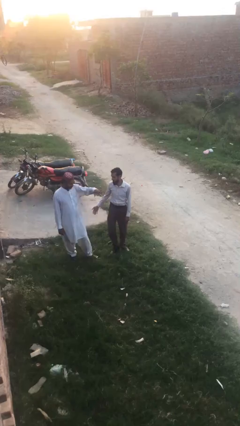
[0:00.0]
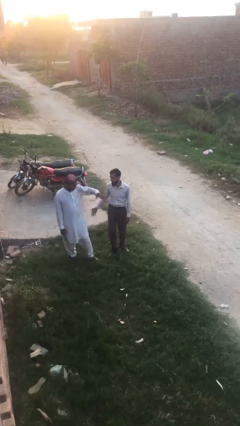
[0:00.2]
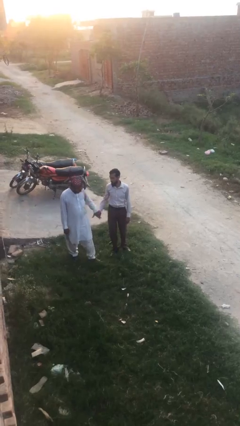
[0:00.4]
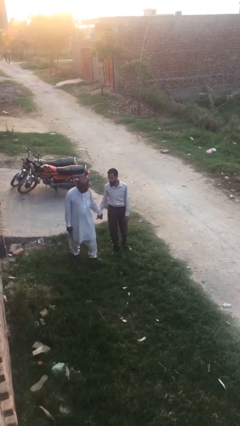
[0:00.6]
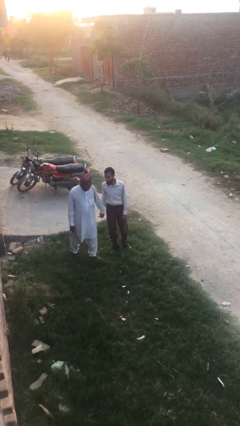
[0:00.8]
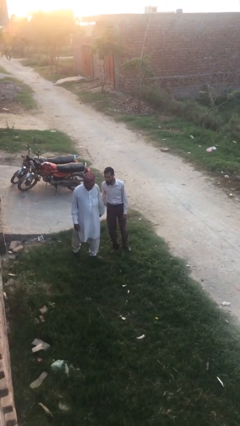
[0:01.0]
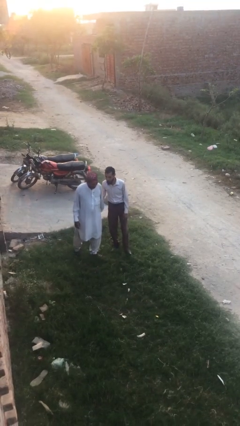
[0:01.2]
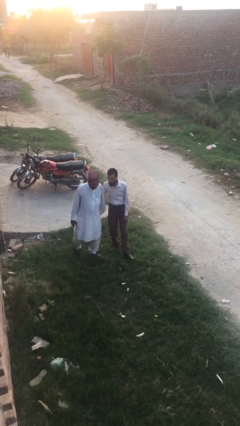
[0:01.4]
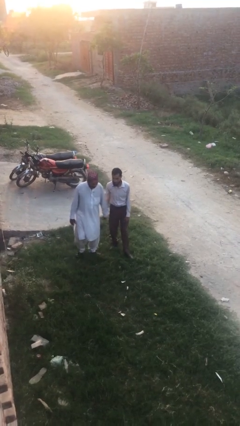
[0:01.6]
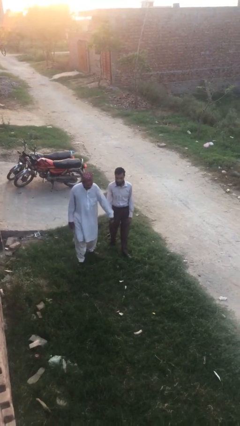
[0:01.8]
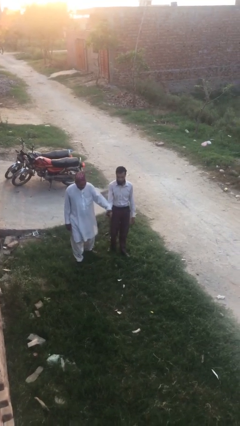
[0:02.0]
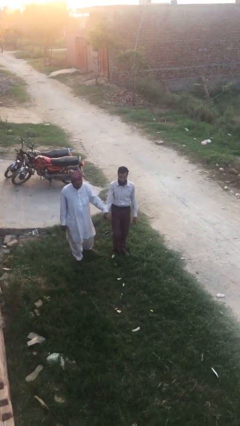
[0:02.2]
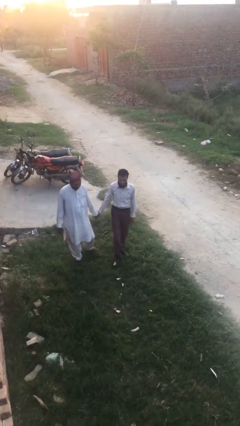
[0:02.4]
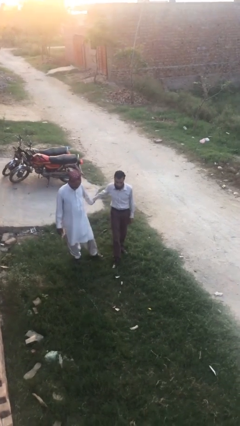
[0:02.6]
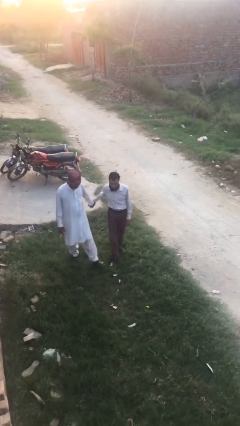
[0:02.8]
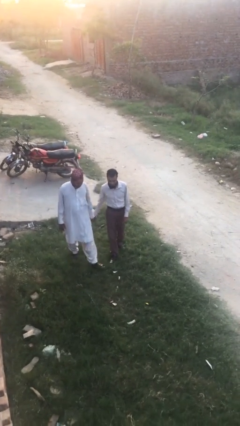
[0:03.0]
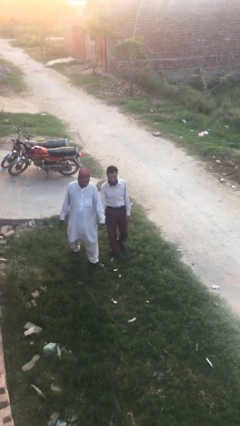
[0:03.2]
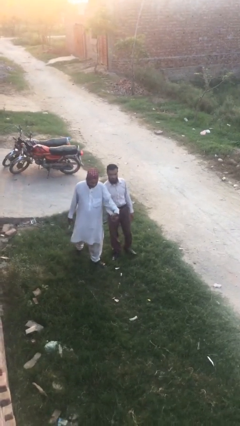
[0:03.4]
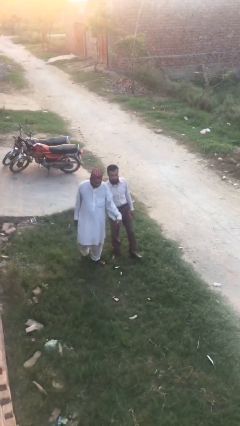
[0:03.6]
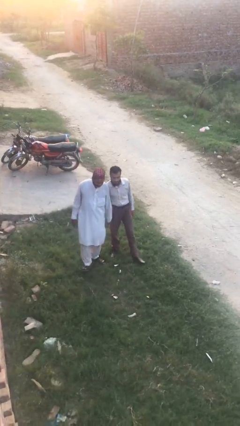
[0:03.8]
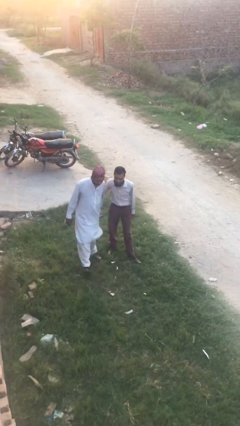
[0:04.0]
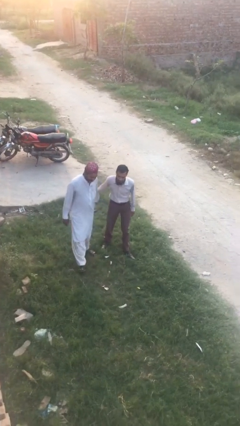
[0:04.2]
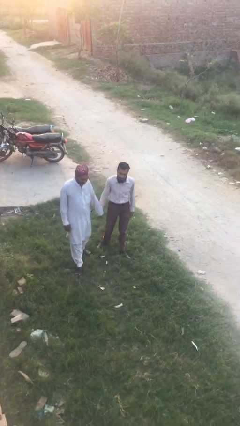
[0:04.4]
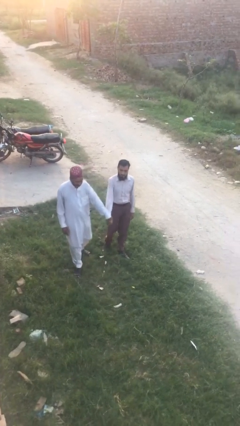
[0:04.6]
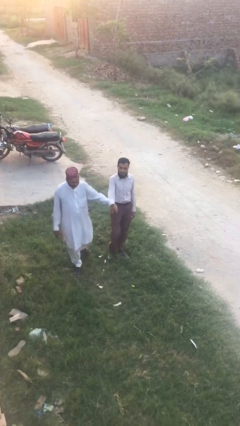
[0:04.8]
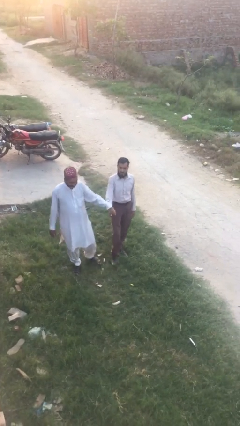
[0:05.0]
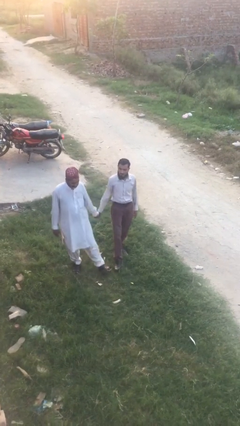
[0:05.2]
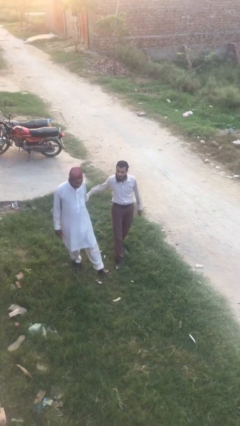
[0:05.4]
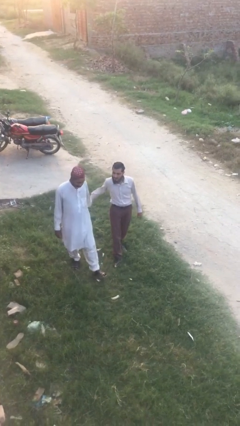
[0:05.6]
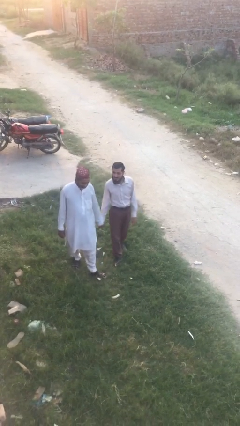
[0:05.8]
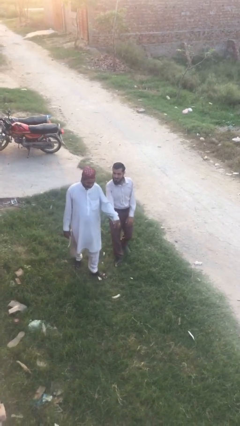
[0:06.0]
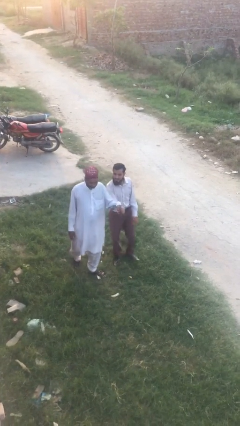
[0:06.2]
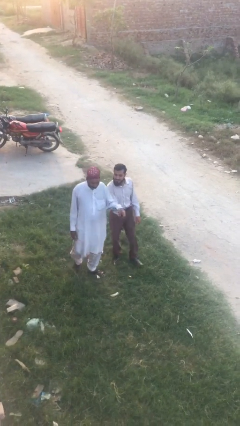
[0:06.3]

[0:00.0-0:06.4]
person holds hand

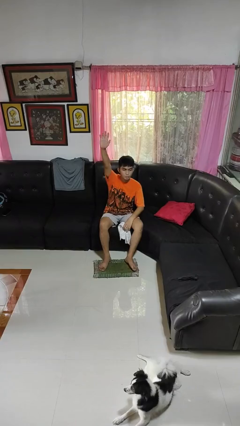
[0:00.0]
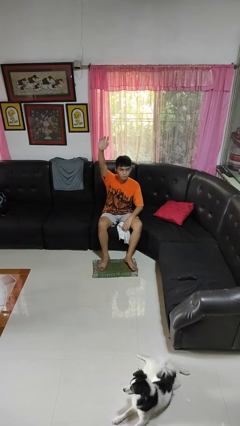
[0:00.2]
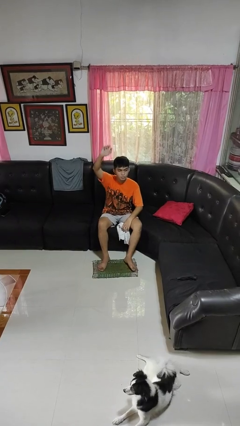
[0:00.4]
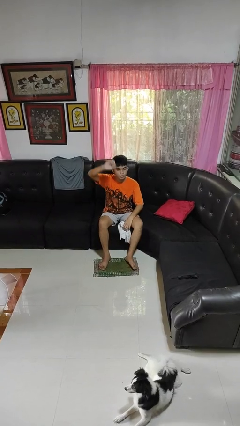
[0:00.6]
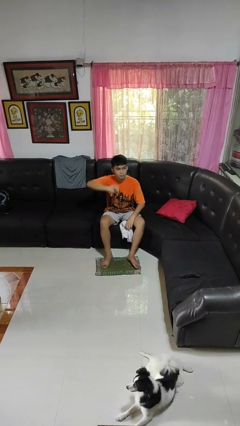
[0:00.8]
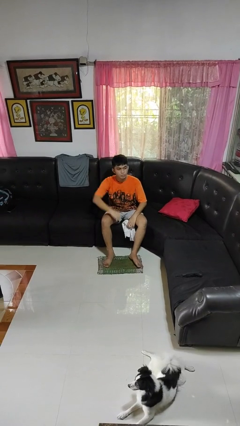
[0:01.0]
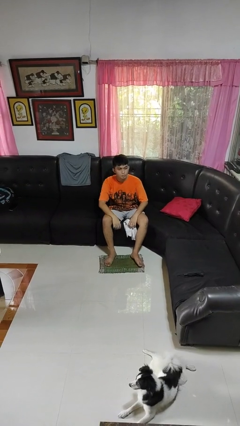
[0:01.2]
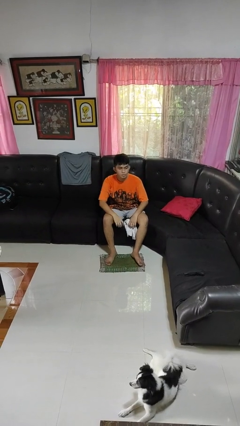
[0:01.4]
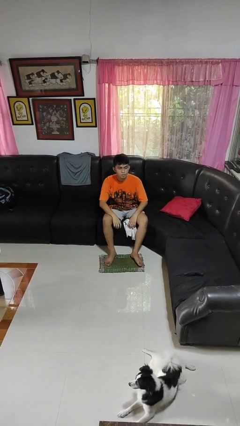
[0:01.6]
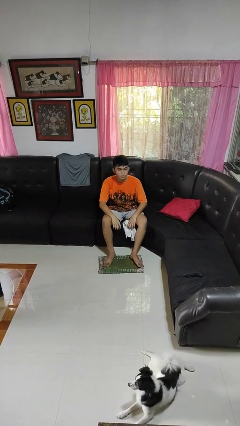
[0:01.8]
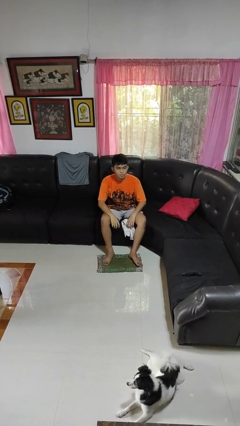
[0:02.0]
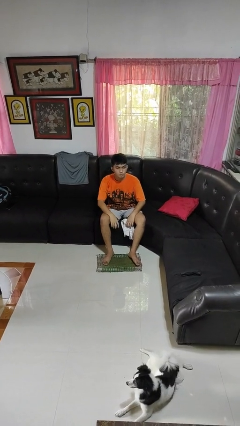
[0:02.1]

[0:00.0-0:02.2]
person gestures lower hand

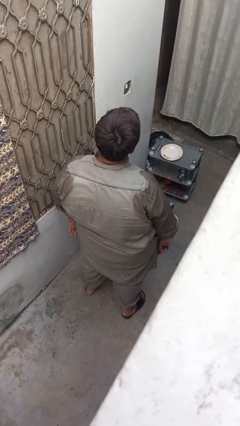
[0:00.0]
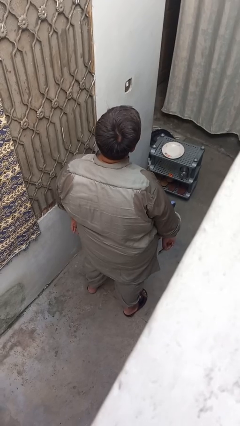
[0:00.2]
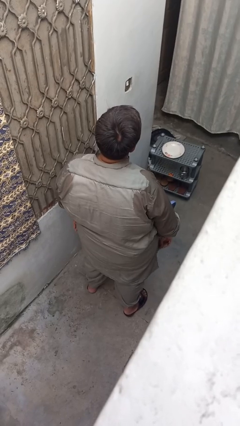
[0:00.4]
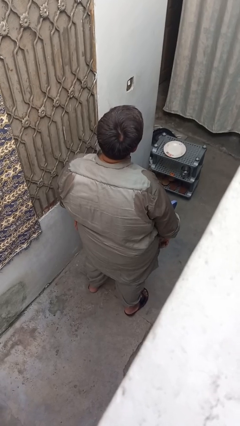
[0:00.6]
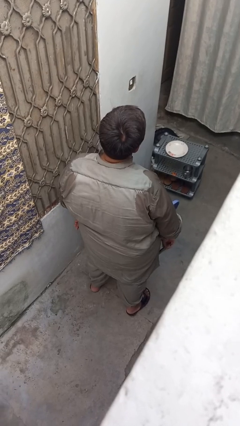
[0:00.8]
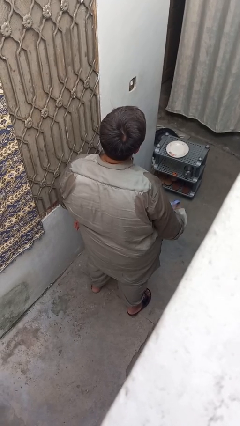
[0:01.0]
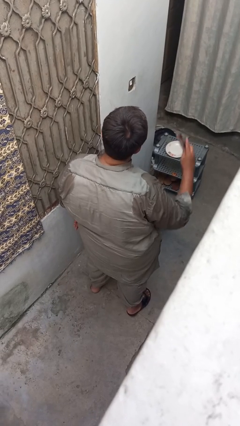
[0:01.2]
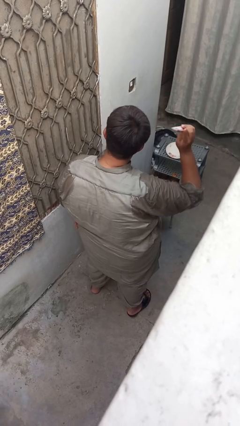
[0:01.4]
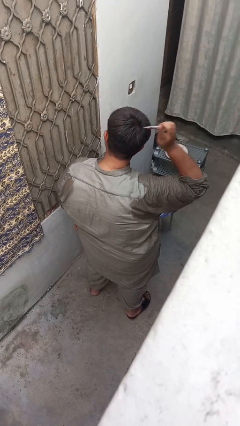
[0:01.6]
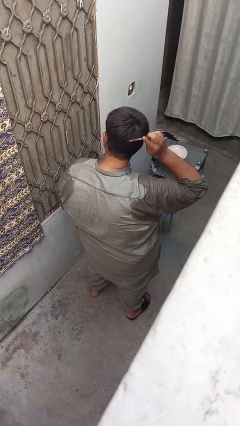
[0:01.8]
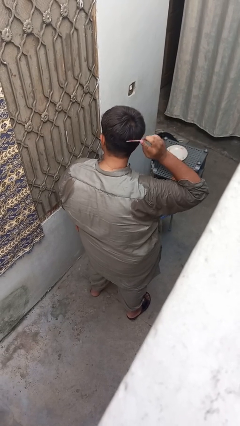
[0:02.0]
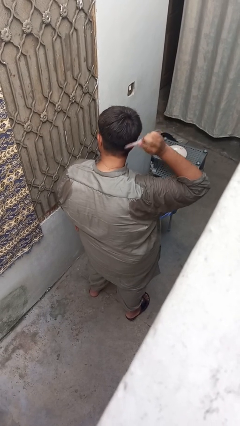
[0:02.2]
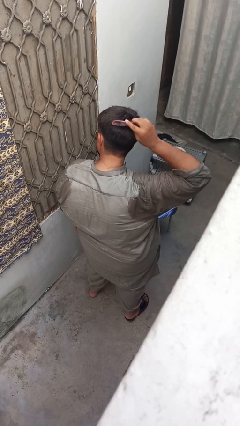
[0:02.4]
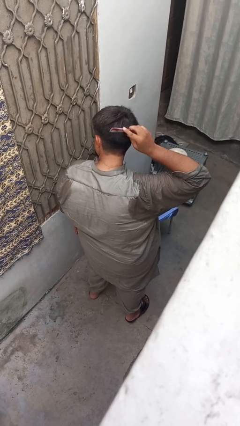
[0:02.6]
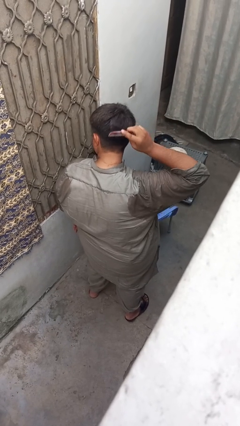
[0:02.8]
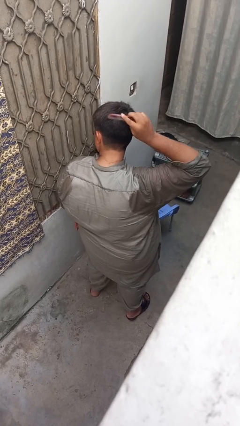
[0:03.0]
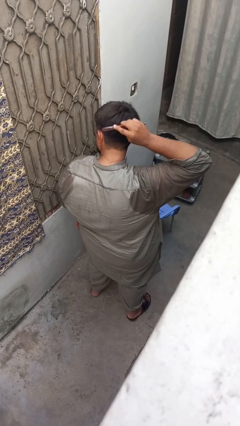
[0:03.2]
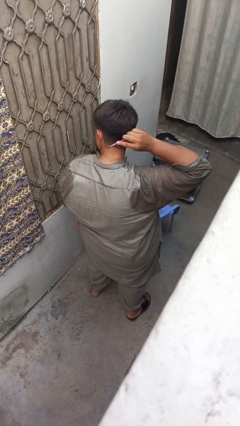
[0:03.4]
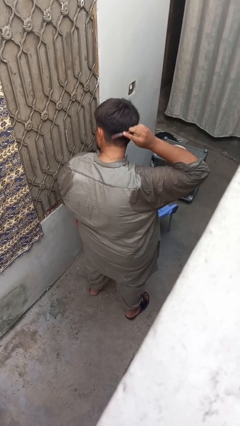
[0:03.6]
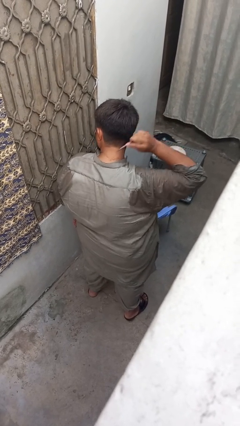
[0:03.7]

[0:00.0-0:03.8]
person brushes hair

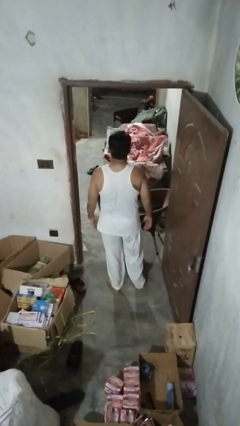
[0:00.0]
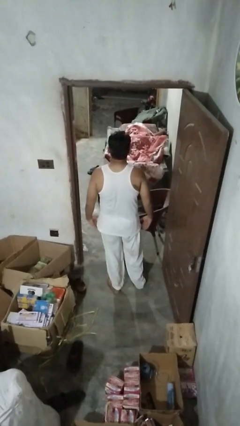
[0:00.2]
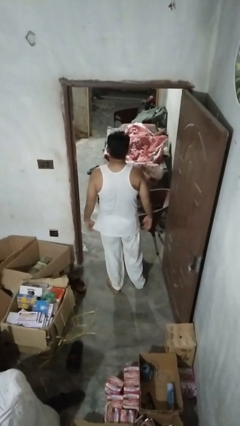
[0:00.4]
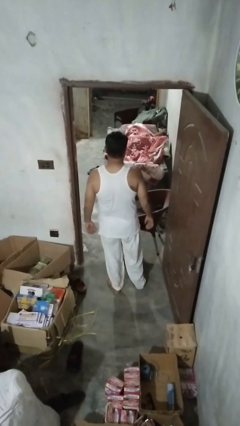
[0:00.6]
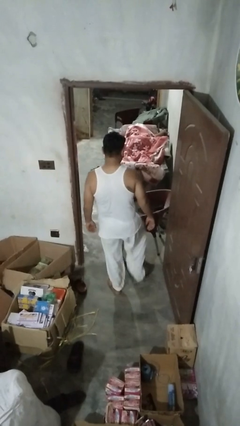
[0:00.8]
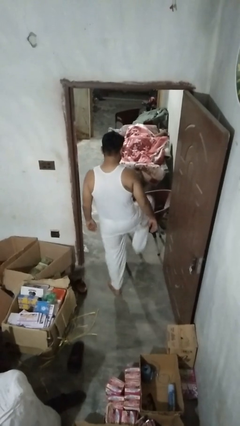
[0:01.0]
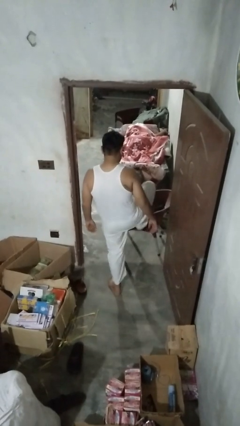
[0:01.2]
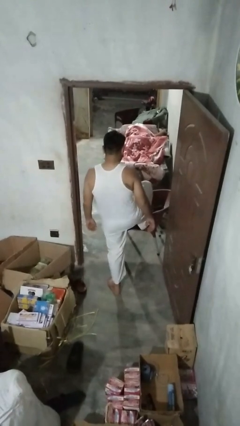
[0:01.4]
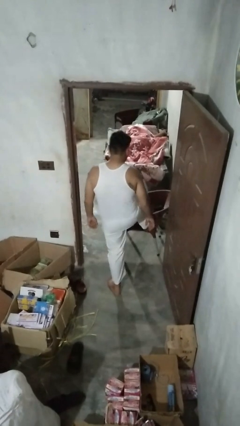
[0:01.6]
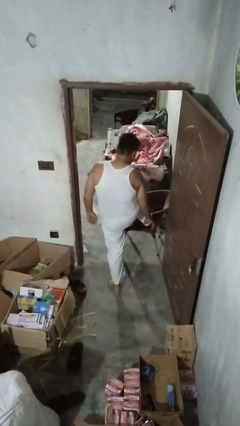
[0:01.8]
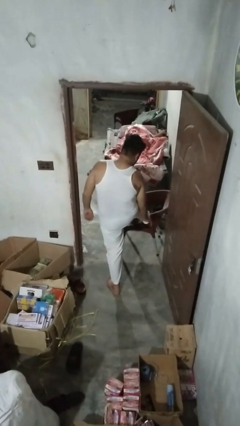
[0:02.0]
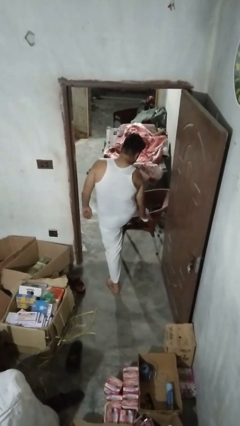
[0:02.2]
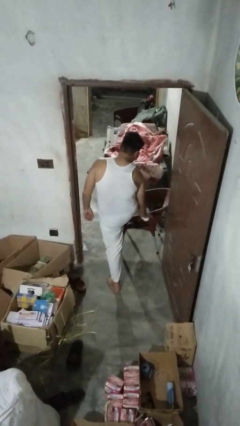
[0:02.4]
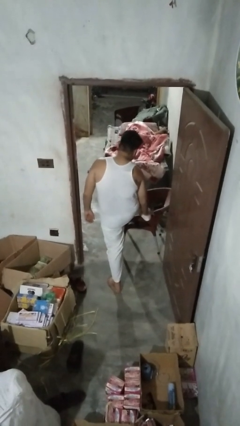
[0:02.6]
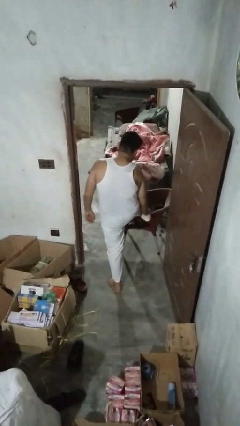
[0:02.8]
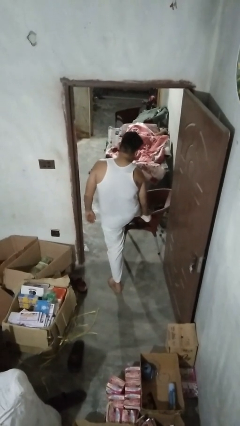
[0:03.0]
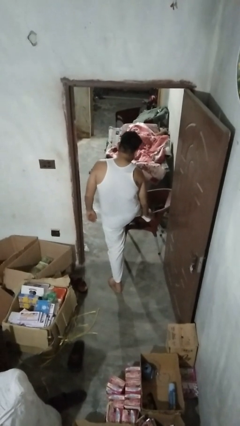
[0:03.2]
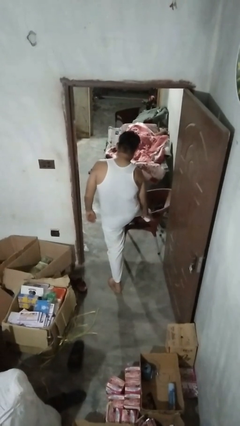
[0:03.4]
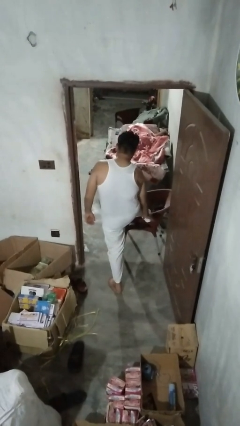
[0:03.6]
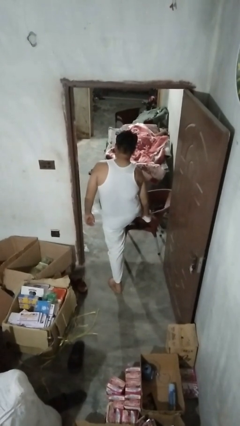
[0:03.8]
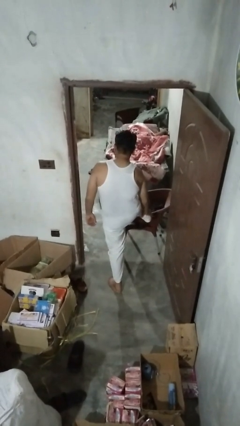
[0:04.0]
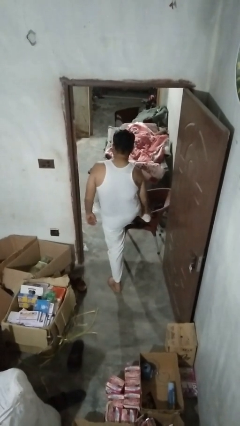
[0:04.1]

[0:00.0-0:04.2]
person stubs toe

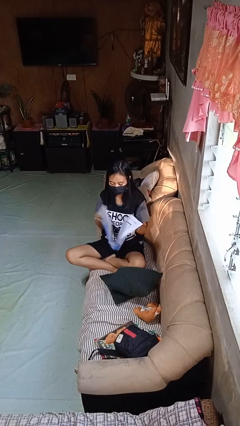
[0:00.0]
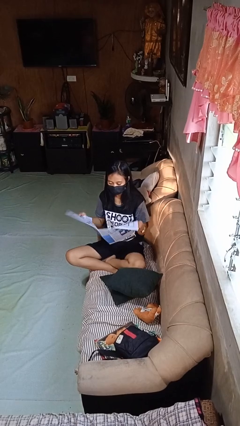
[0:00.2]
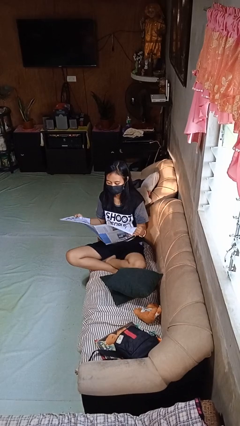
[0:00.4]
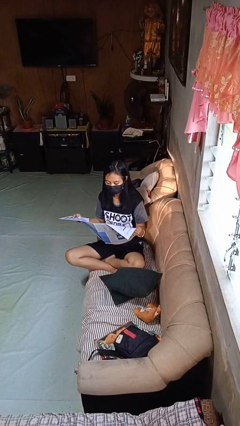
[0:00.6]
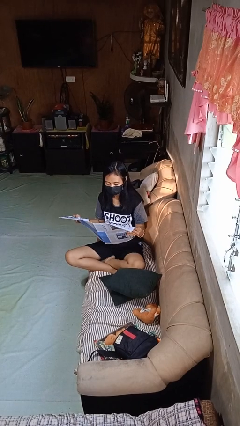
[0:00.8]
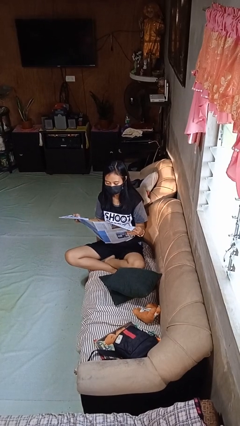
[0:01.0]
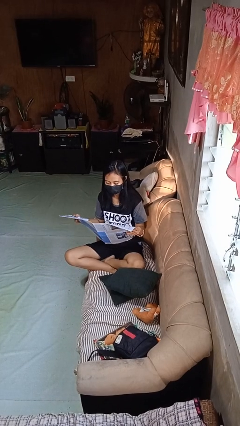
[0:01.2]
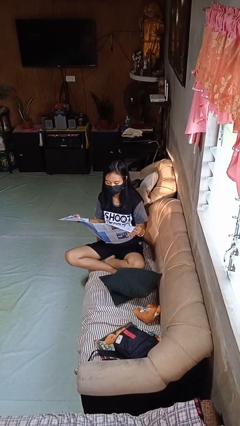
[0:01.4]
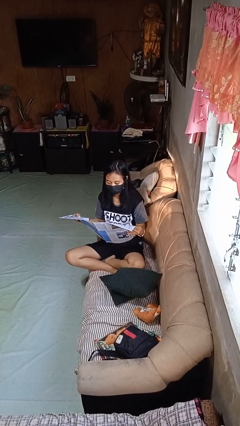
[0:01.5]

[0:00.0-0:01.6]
person reads newspaper
